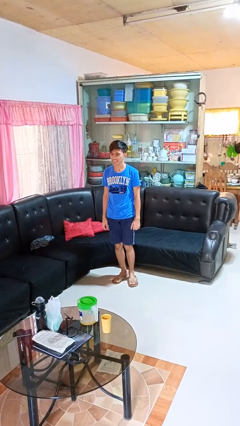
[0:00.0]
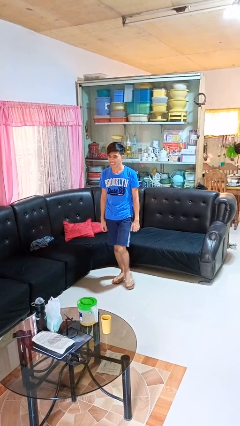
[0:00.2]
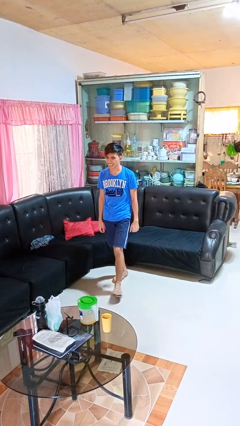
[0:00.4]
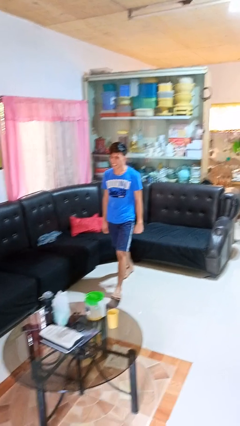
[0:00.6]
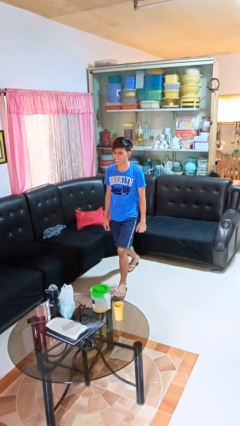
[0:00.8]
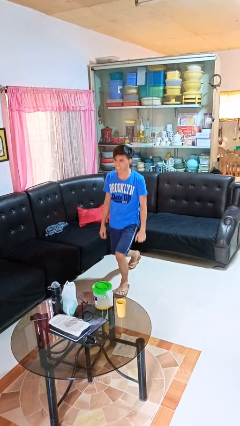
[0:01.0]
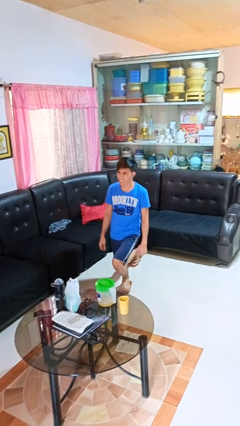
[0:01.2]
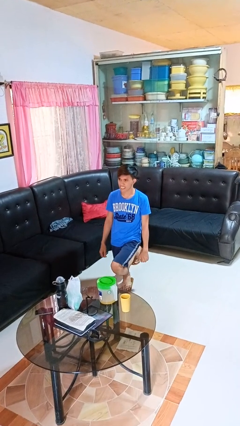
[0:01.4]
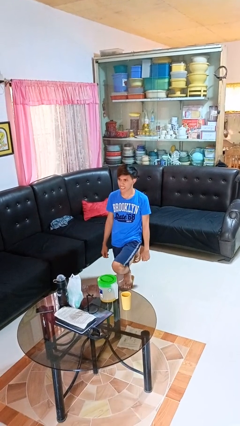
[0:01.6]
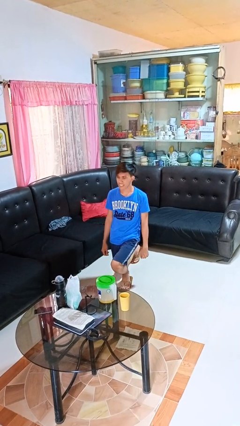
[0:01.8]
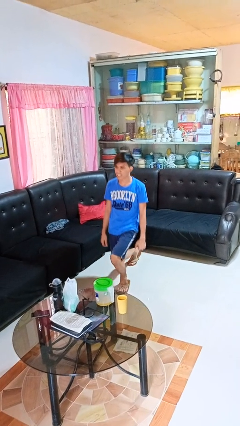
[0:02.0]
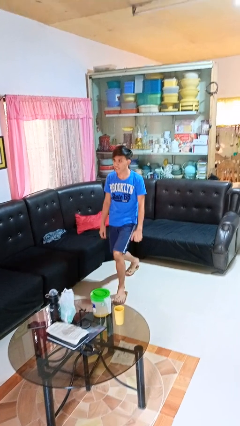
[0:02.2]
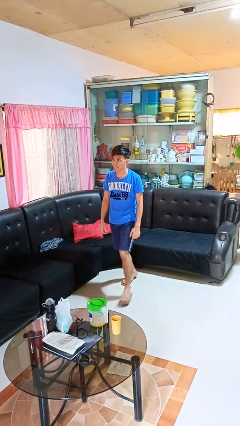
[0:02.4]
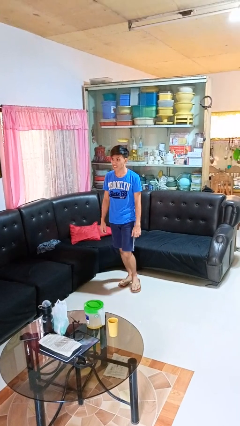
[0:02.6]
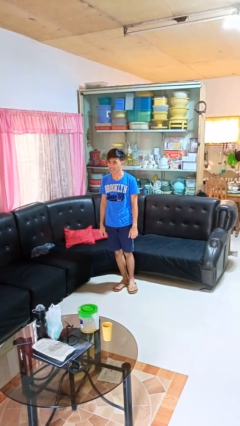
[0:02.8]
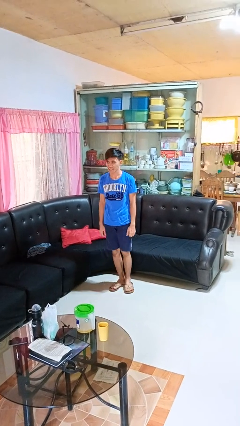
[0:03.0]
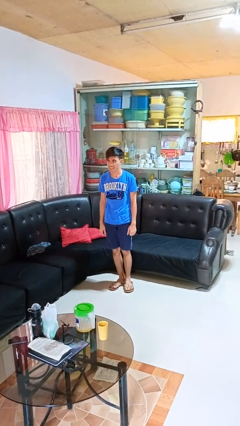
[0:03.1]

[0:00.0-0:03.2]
person exercises with lunges

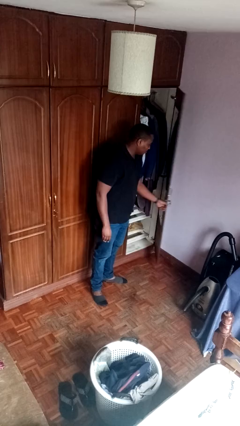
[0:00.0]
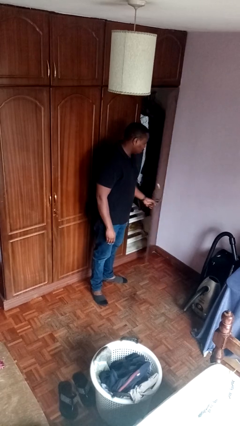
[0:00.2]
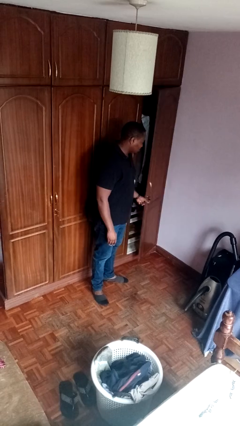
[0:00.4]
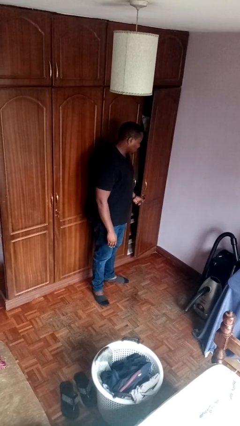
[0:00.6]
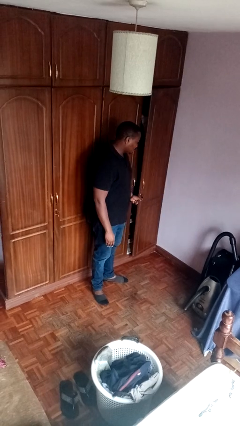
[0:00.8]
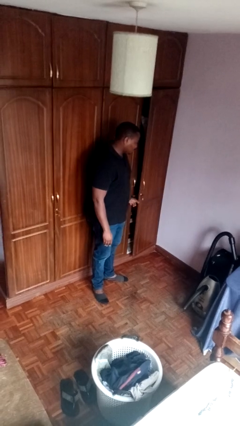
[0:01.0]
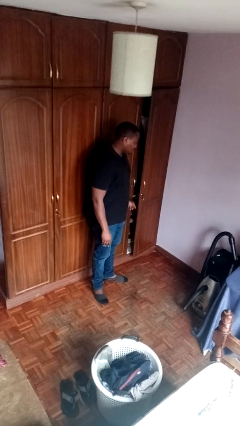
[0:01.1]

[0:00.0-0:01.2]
person closes closet door

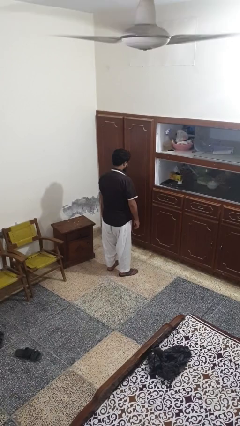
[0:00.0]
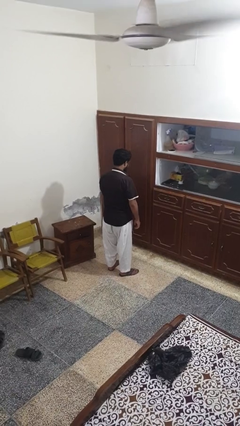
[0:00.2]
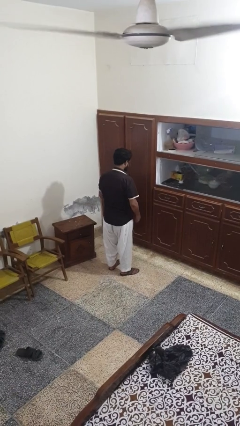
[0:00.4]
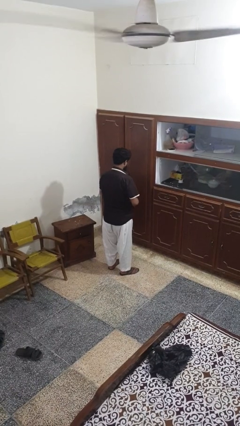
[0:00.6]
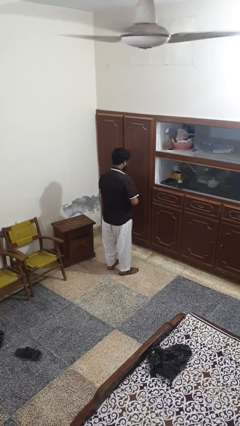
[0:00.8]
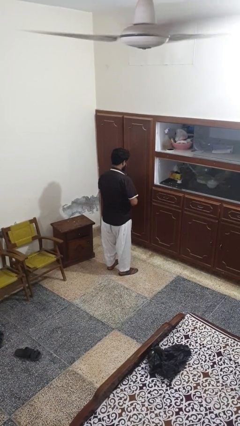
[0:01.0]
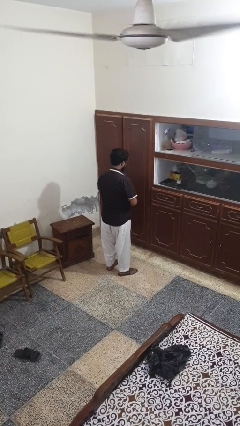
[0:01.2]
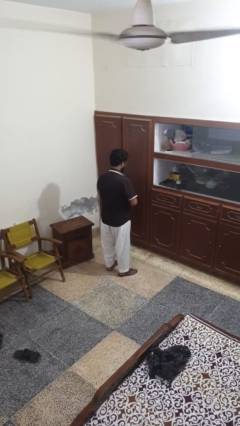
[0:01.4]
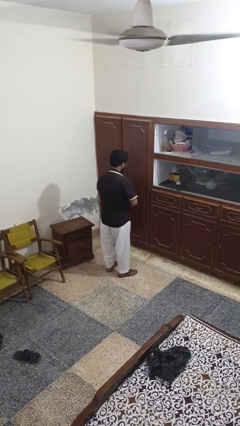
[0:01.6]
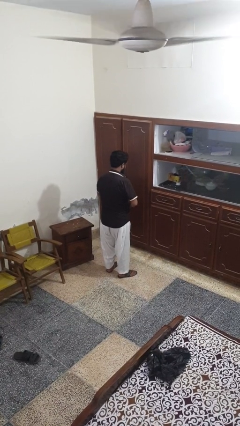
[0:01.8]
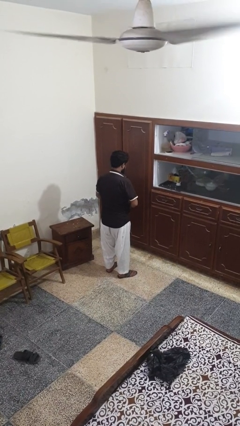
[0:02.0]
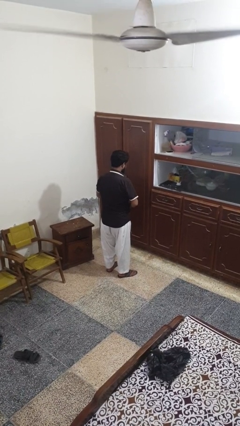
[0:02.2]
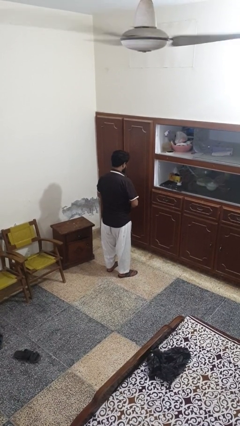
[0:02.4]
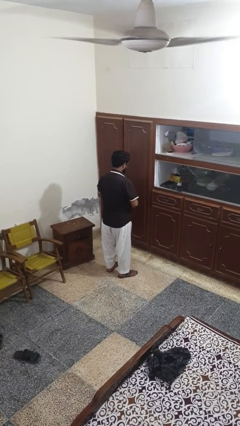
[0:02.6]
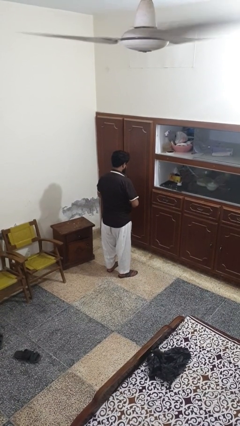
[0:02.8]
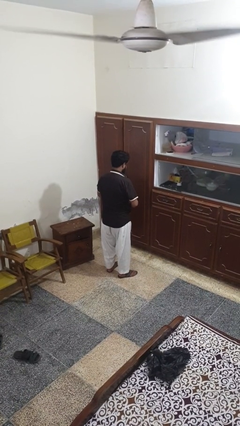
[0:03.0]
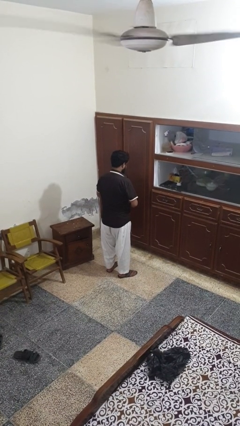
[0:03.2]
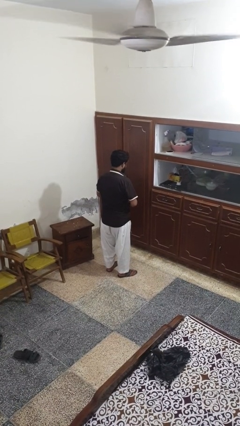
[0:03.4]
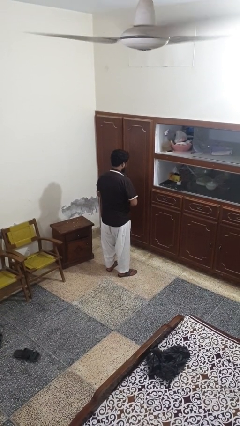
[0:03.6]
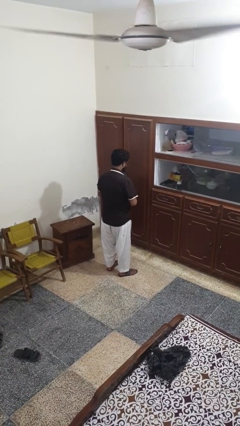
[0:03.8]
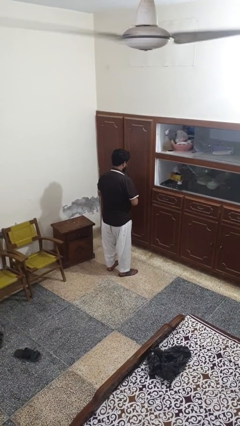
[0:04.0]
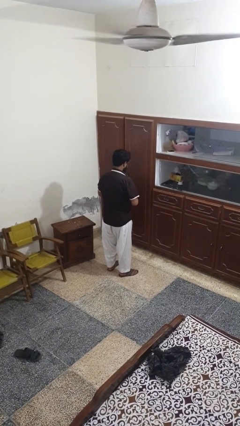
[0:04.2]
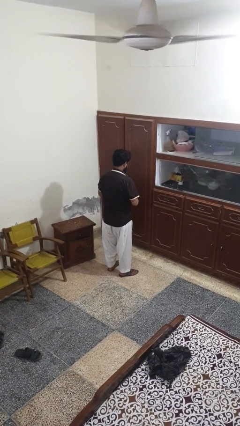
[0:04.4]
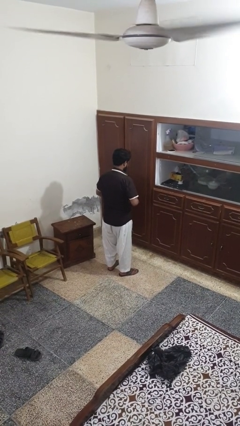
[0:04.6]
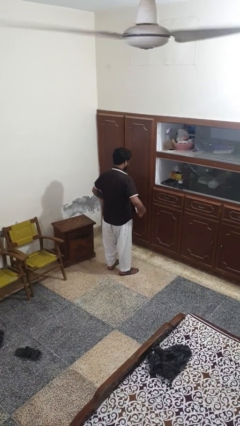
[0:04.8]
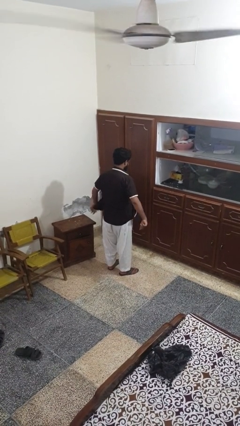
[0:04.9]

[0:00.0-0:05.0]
person unbuttons shirt

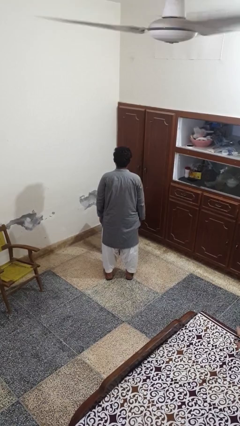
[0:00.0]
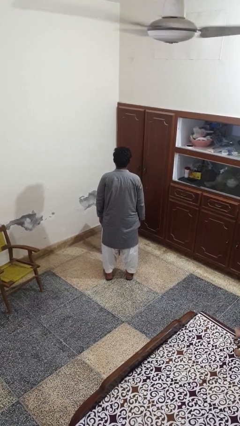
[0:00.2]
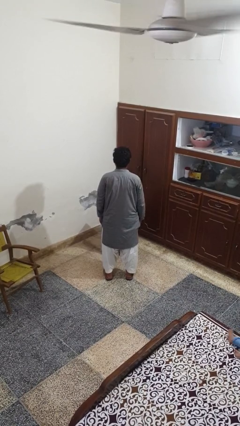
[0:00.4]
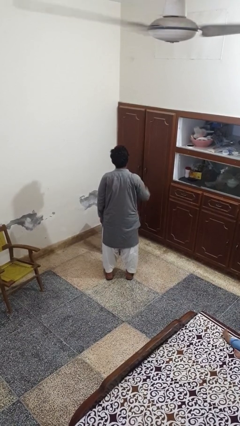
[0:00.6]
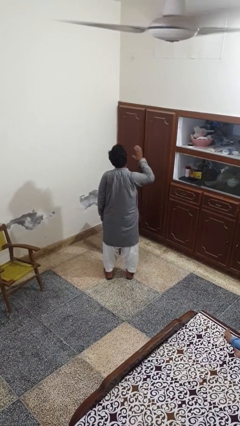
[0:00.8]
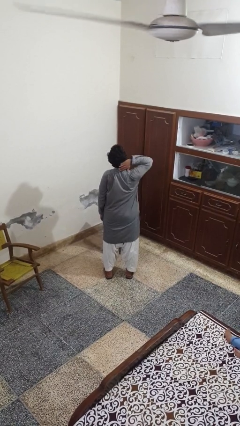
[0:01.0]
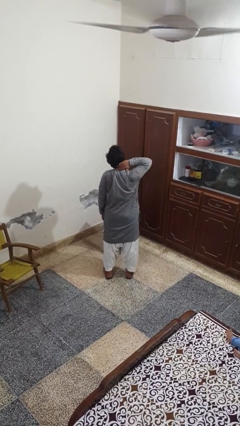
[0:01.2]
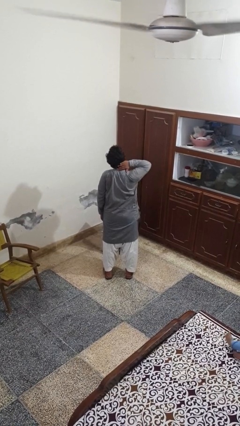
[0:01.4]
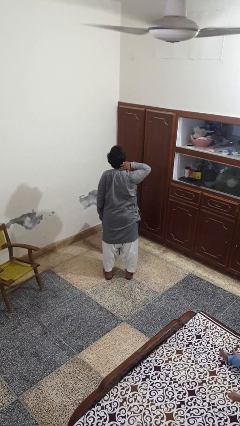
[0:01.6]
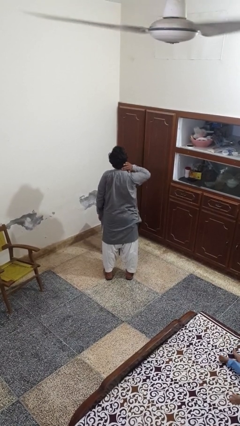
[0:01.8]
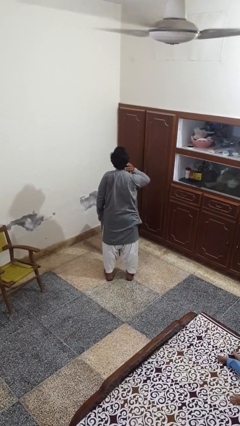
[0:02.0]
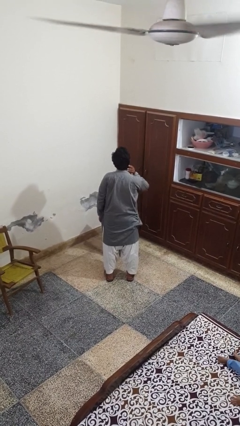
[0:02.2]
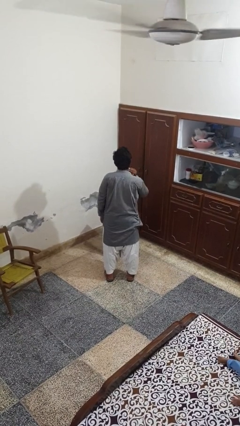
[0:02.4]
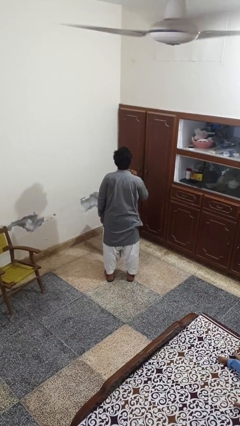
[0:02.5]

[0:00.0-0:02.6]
person rubs neck

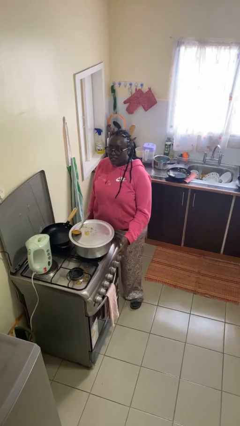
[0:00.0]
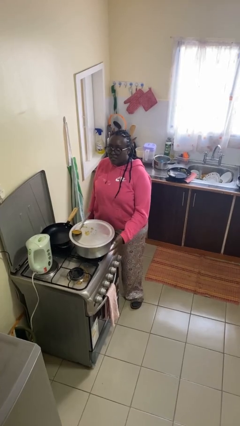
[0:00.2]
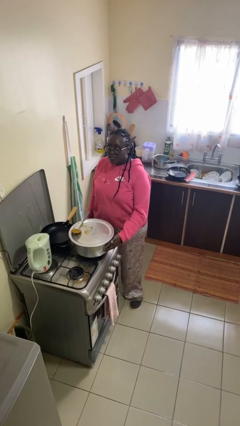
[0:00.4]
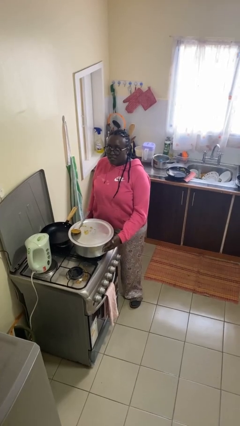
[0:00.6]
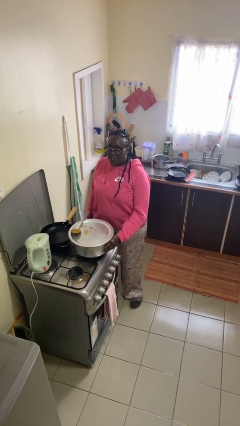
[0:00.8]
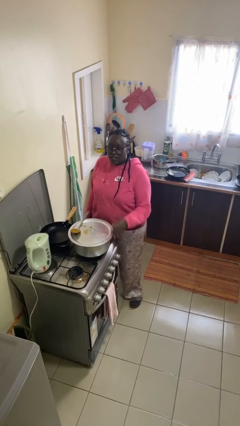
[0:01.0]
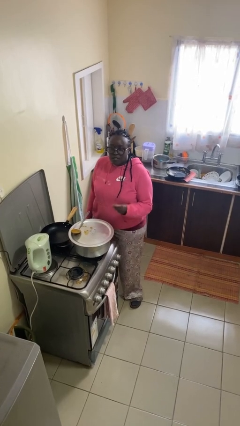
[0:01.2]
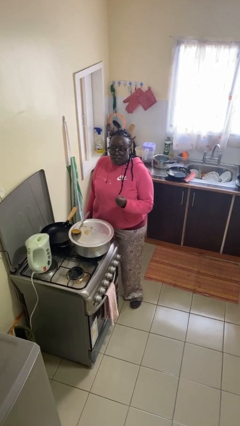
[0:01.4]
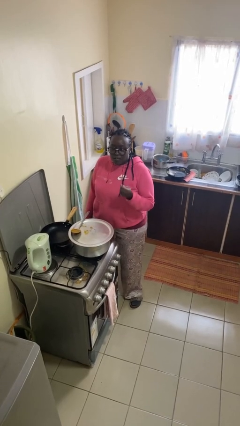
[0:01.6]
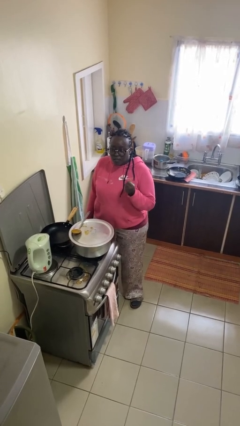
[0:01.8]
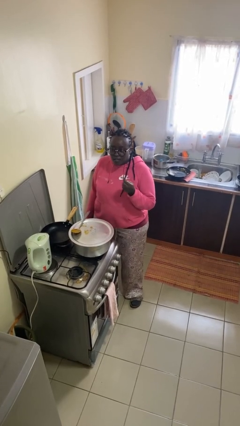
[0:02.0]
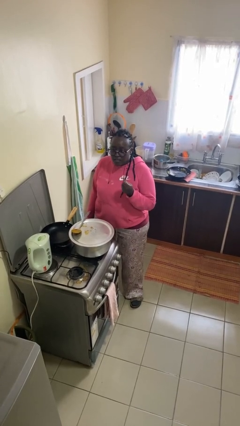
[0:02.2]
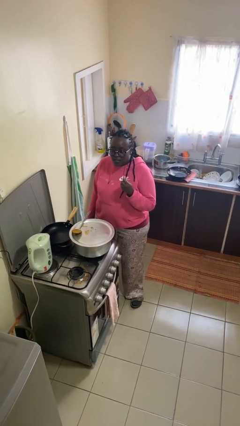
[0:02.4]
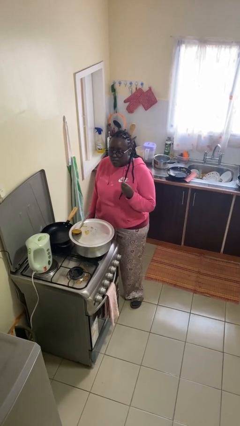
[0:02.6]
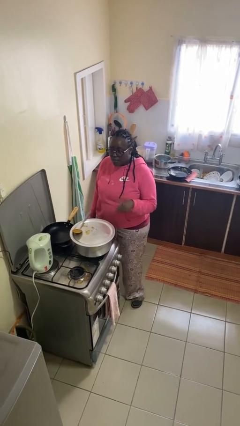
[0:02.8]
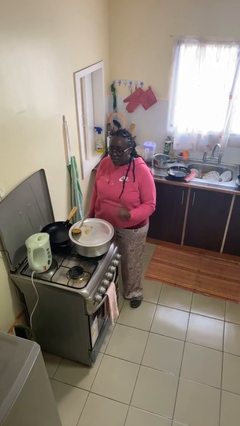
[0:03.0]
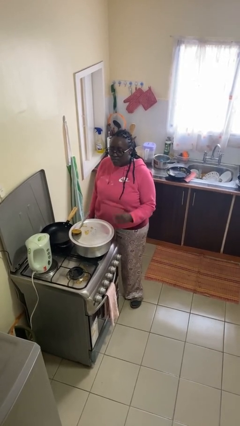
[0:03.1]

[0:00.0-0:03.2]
person burns hand

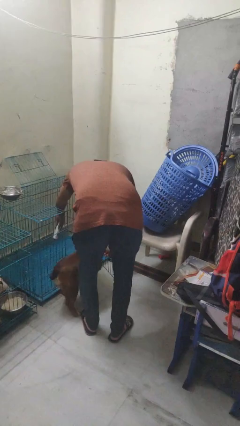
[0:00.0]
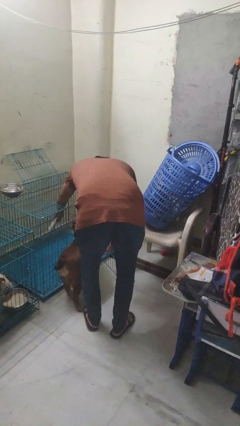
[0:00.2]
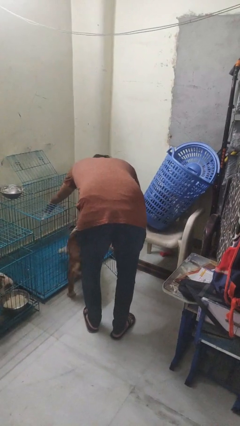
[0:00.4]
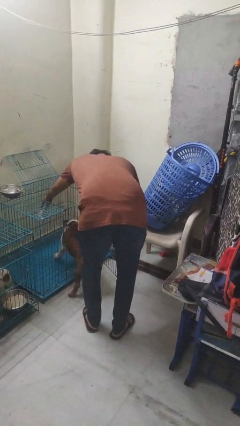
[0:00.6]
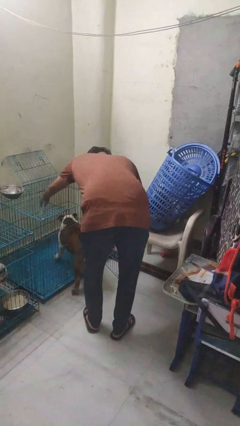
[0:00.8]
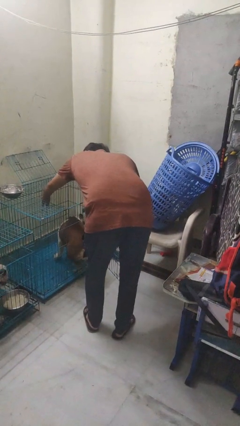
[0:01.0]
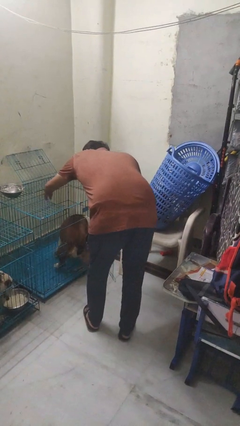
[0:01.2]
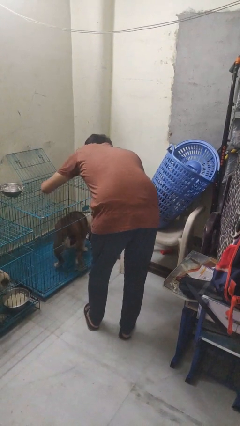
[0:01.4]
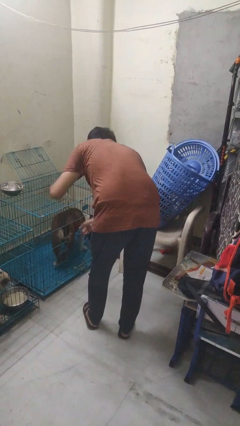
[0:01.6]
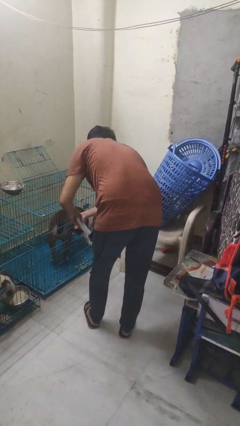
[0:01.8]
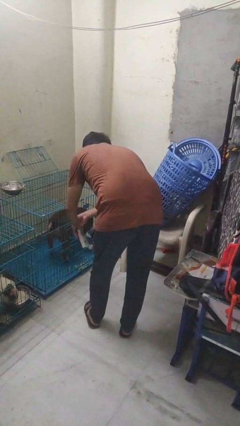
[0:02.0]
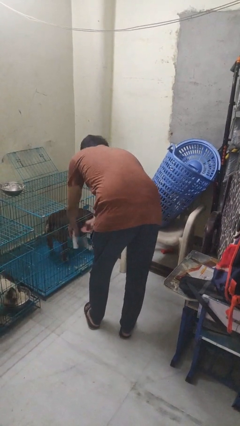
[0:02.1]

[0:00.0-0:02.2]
person crates dog
